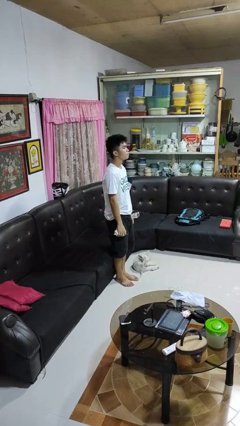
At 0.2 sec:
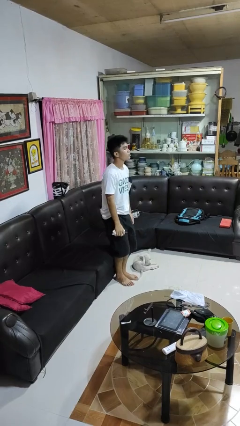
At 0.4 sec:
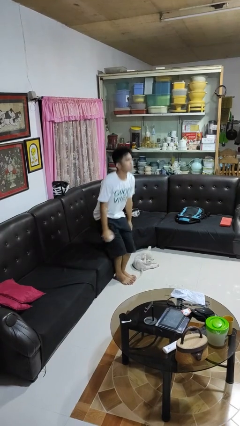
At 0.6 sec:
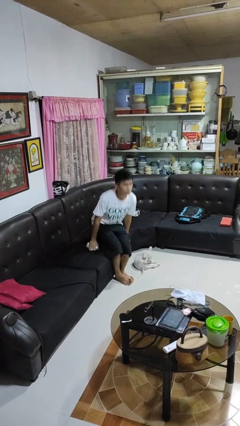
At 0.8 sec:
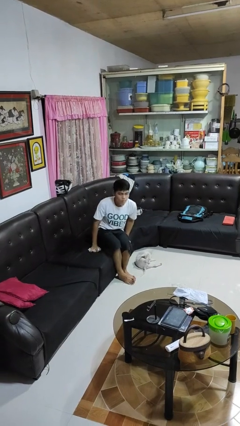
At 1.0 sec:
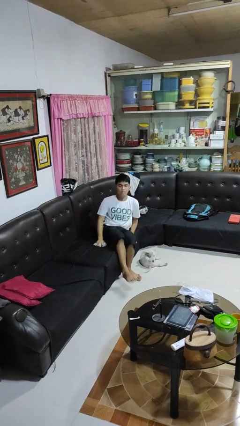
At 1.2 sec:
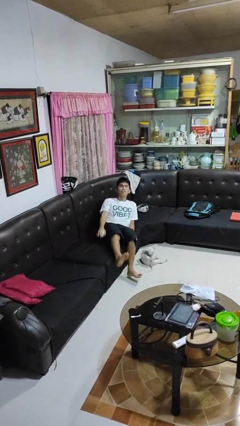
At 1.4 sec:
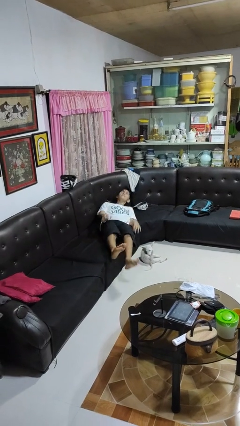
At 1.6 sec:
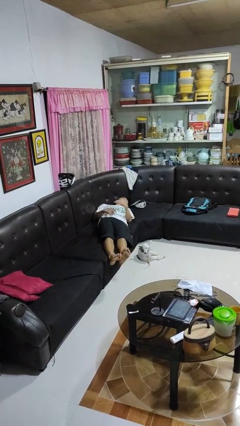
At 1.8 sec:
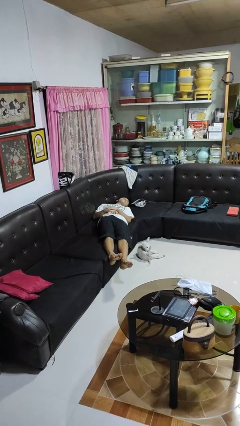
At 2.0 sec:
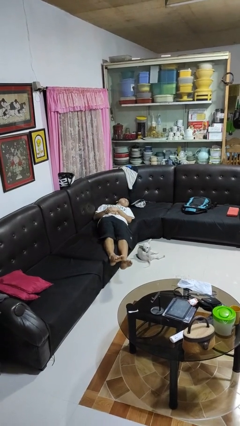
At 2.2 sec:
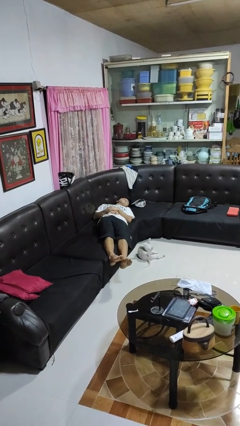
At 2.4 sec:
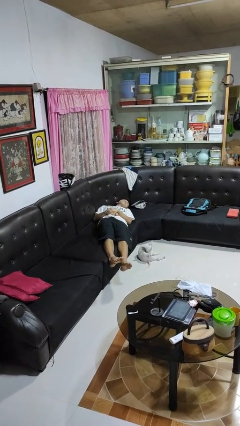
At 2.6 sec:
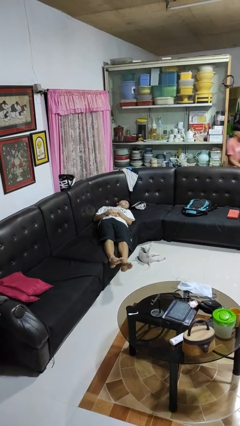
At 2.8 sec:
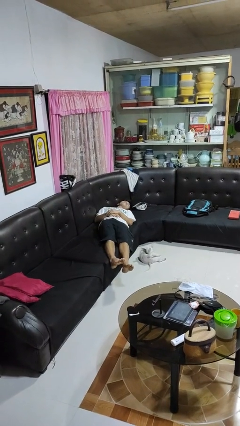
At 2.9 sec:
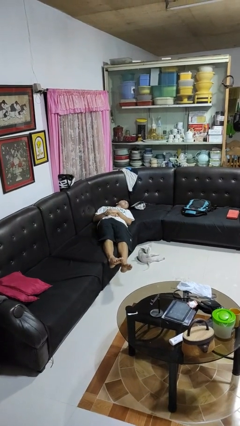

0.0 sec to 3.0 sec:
person lies down on couch

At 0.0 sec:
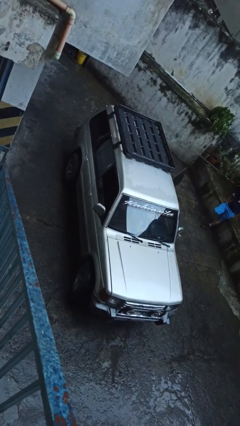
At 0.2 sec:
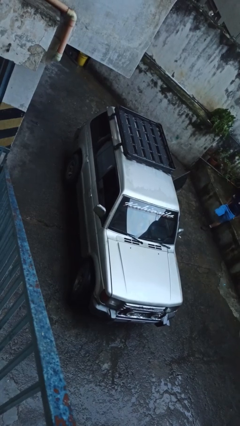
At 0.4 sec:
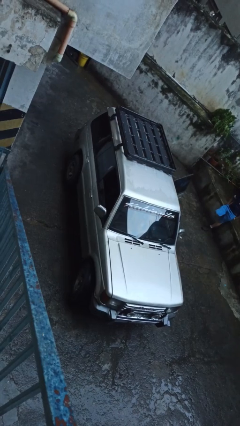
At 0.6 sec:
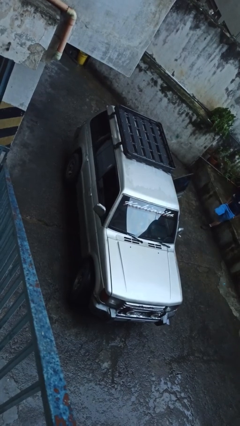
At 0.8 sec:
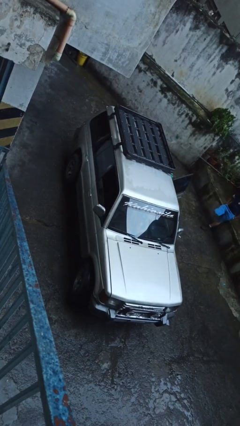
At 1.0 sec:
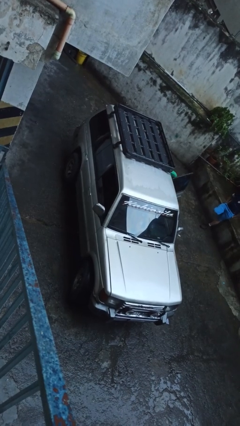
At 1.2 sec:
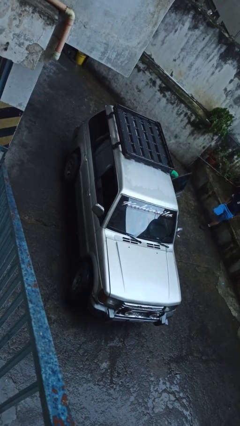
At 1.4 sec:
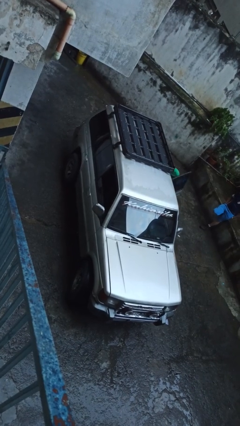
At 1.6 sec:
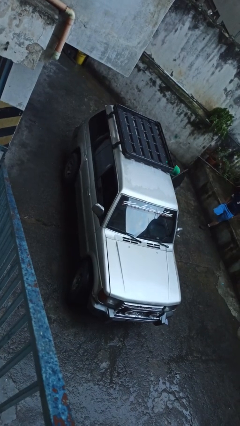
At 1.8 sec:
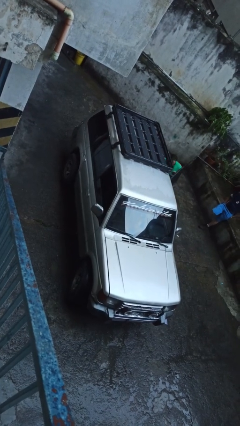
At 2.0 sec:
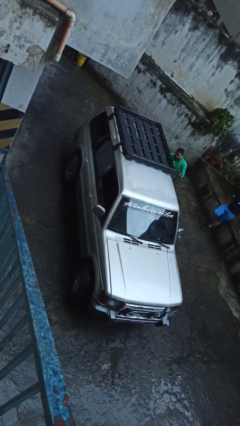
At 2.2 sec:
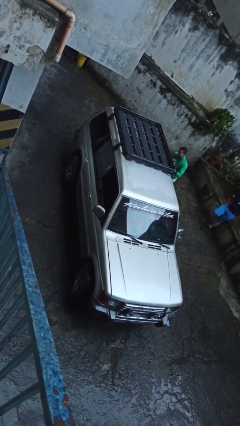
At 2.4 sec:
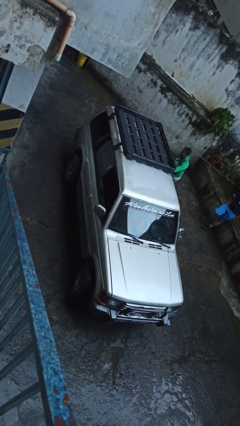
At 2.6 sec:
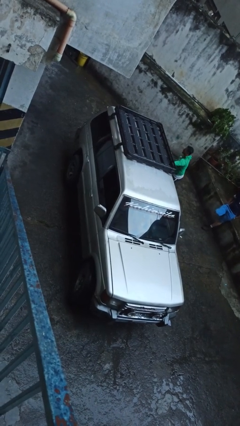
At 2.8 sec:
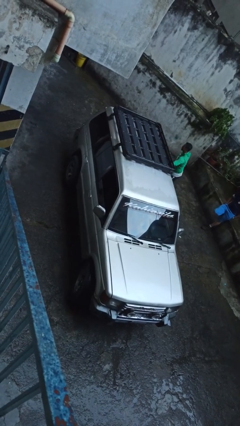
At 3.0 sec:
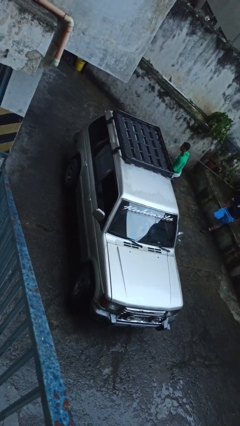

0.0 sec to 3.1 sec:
car drops off person

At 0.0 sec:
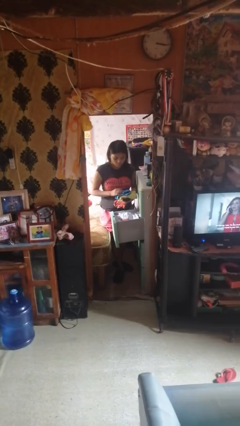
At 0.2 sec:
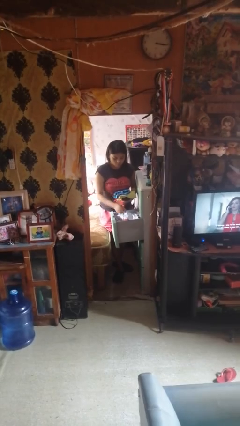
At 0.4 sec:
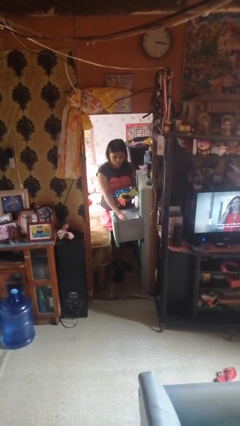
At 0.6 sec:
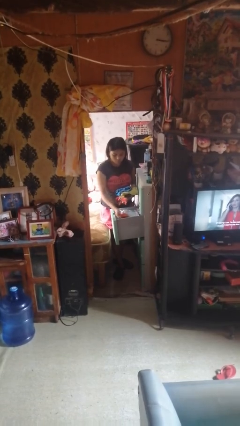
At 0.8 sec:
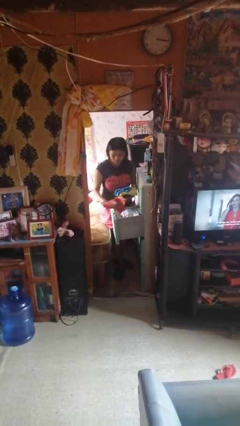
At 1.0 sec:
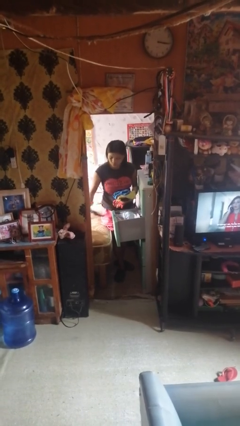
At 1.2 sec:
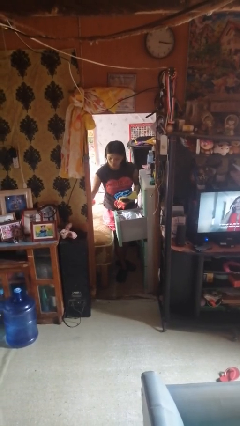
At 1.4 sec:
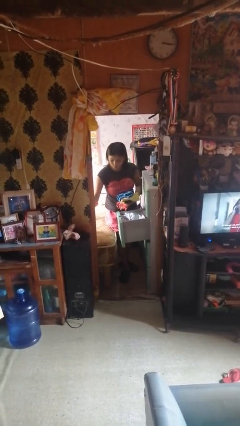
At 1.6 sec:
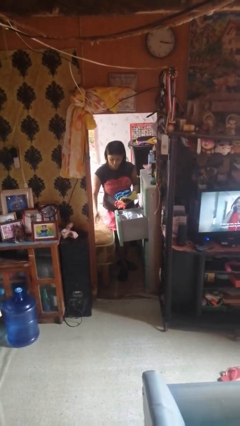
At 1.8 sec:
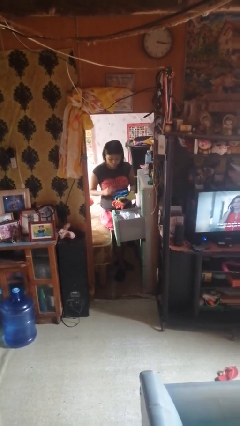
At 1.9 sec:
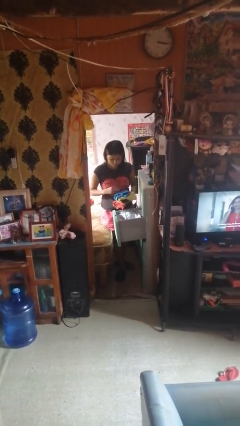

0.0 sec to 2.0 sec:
person takes clothes from dresser

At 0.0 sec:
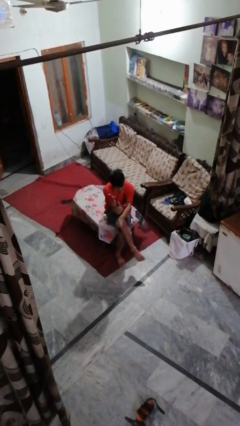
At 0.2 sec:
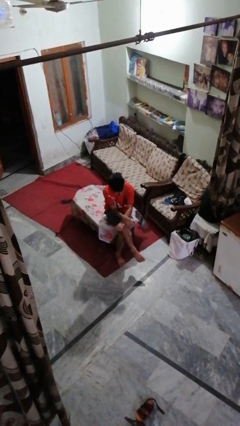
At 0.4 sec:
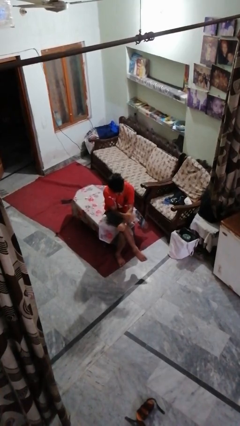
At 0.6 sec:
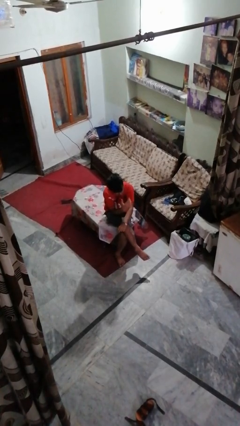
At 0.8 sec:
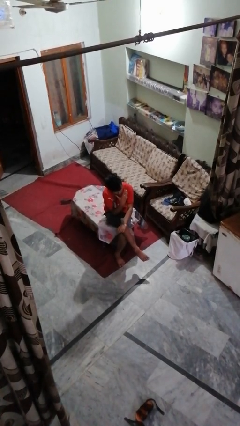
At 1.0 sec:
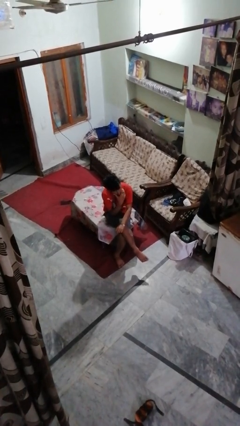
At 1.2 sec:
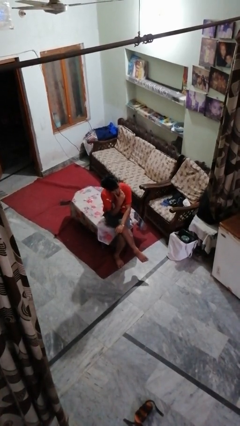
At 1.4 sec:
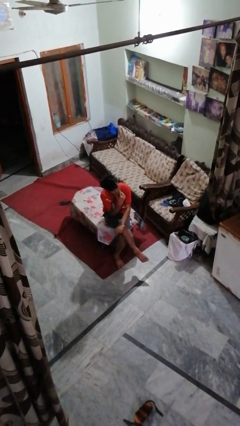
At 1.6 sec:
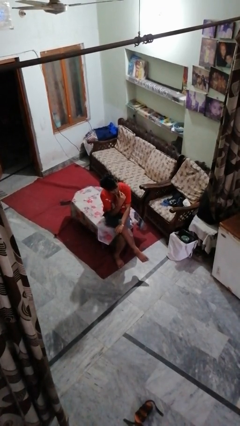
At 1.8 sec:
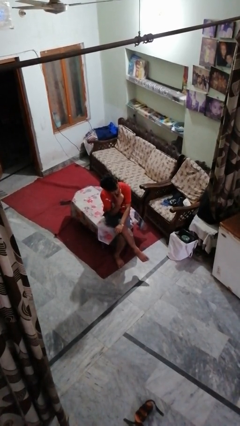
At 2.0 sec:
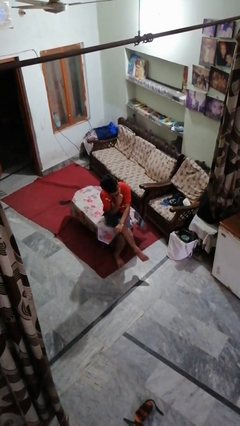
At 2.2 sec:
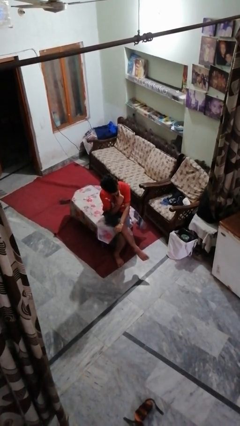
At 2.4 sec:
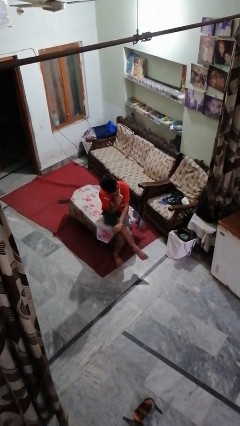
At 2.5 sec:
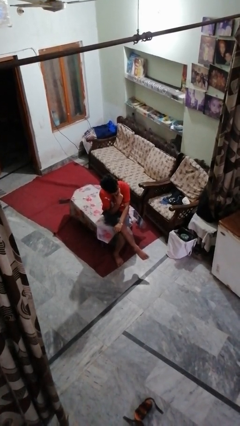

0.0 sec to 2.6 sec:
person strokes chin

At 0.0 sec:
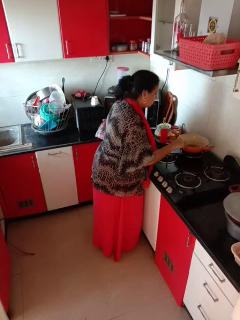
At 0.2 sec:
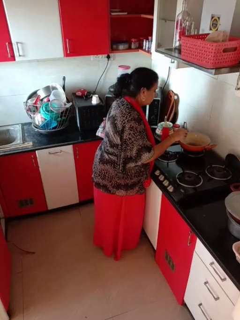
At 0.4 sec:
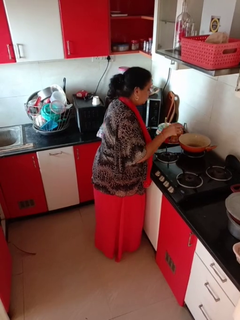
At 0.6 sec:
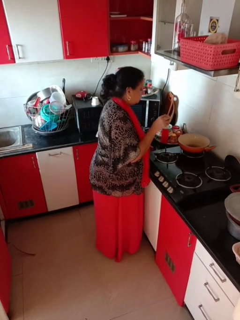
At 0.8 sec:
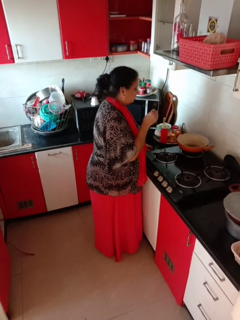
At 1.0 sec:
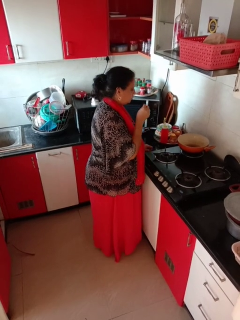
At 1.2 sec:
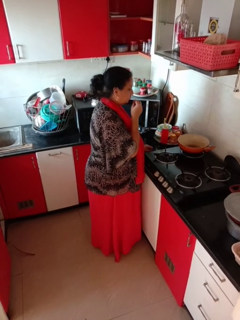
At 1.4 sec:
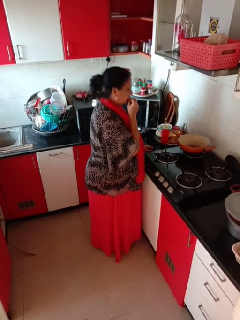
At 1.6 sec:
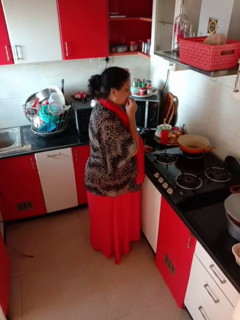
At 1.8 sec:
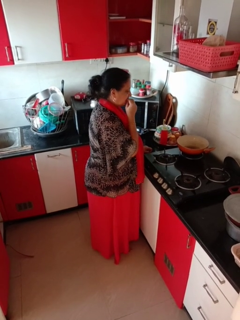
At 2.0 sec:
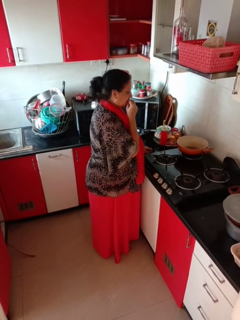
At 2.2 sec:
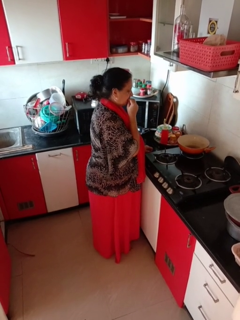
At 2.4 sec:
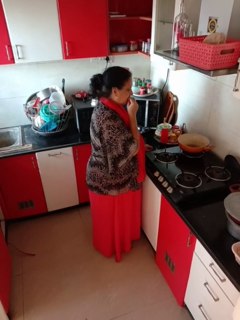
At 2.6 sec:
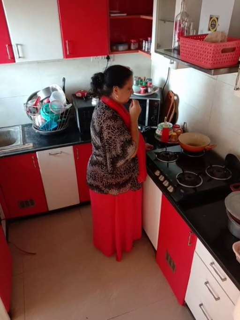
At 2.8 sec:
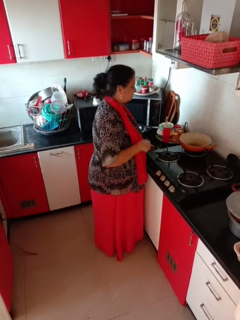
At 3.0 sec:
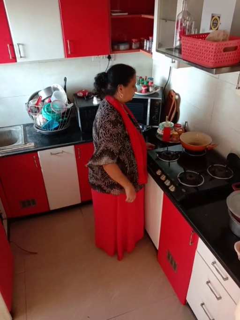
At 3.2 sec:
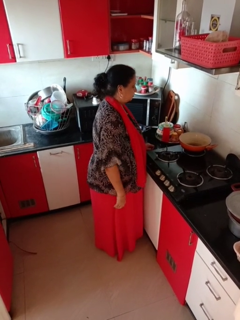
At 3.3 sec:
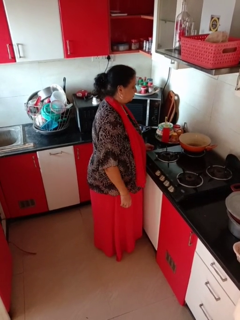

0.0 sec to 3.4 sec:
person burns hand

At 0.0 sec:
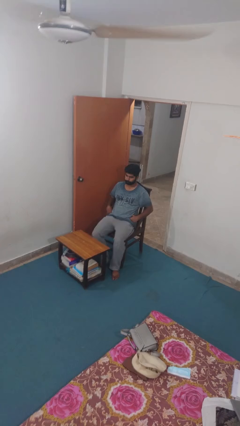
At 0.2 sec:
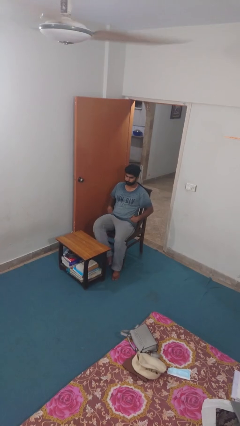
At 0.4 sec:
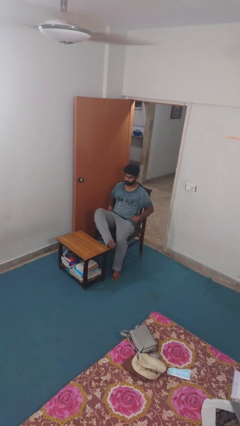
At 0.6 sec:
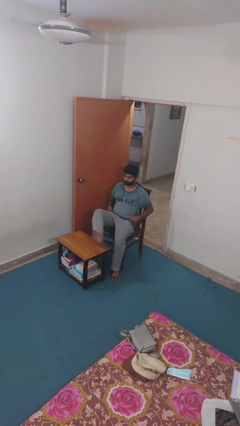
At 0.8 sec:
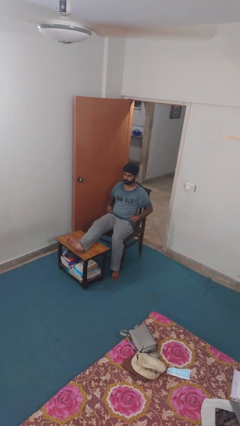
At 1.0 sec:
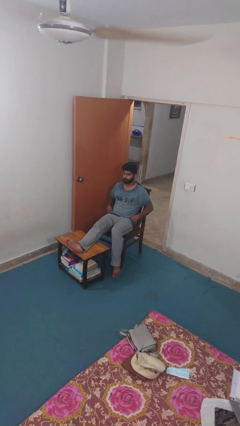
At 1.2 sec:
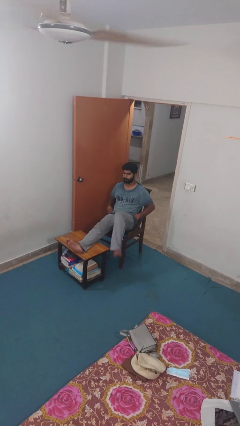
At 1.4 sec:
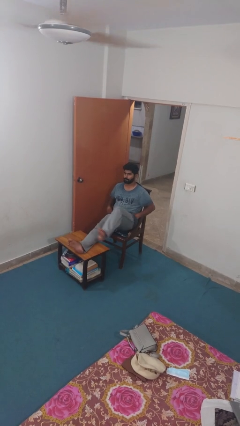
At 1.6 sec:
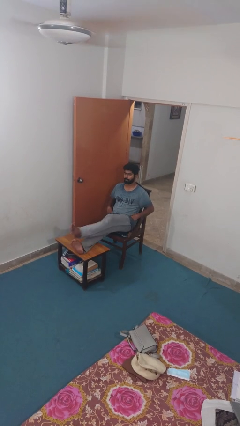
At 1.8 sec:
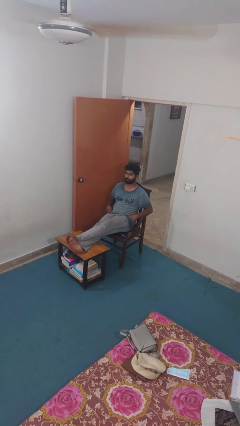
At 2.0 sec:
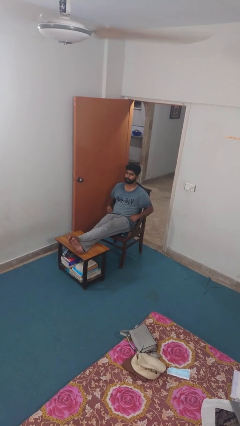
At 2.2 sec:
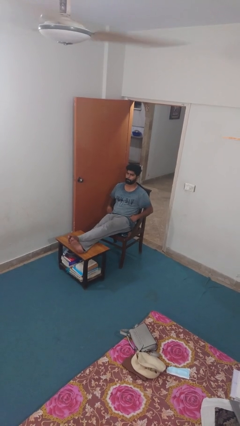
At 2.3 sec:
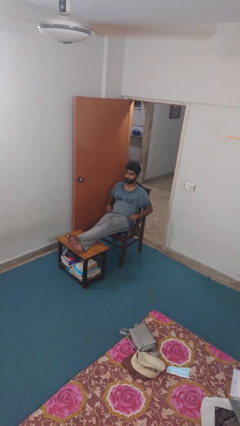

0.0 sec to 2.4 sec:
person puts feet up

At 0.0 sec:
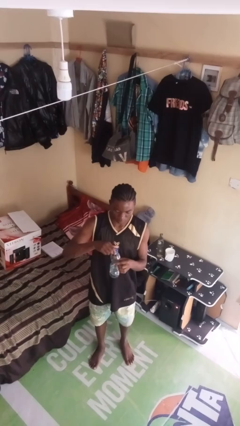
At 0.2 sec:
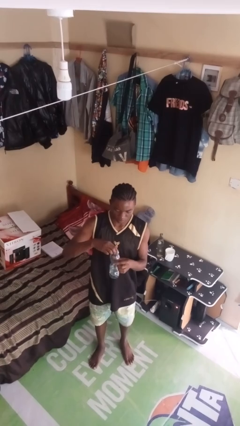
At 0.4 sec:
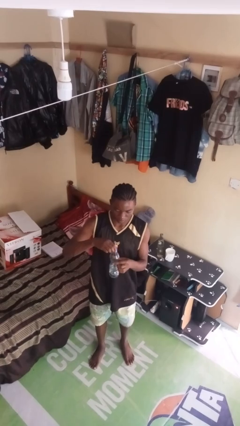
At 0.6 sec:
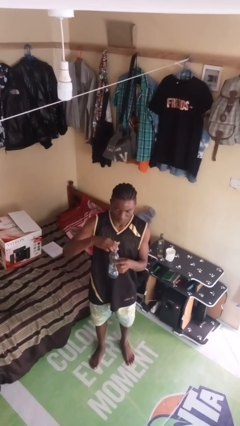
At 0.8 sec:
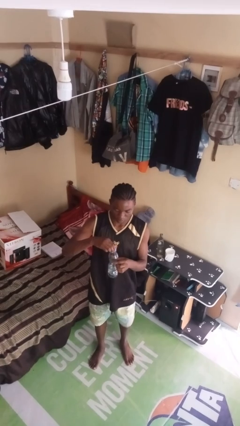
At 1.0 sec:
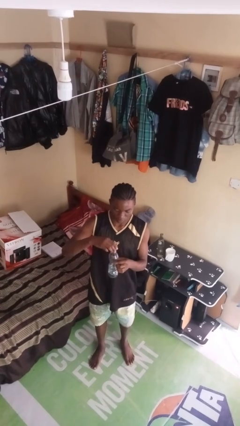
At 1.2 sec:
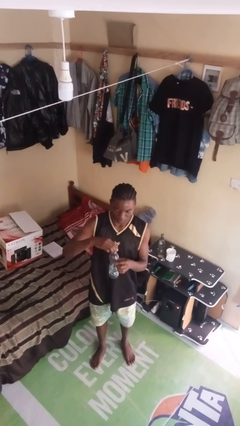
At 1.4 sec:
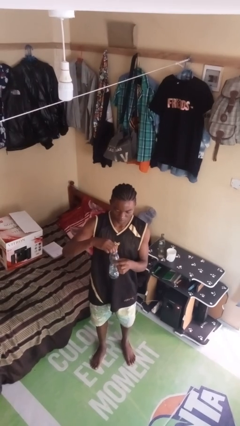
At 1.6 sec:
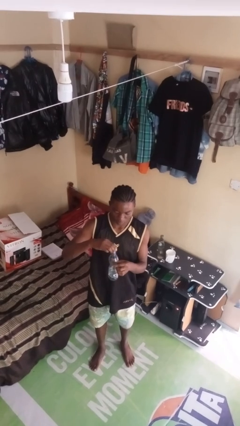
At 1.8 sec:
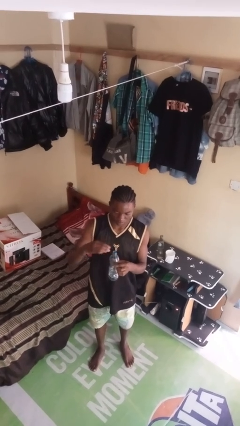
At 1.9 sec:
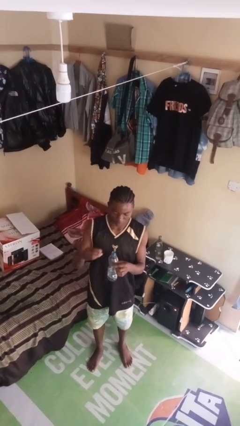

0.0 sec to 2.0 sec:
person unscrews lid from bottle
